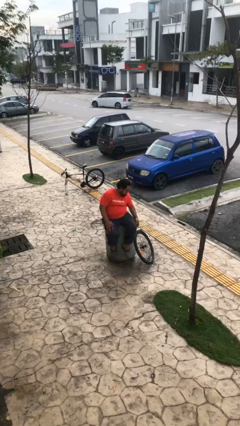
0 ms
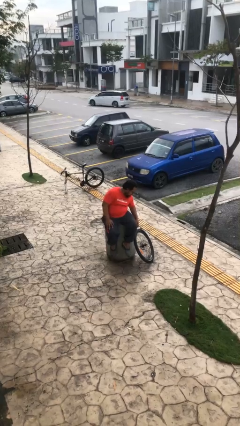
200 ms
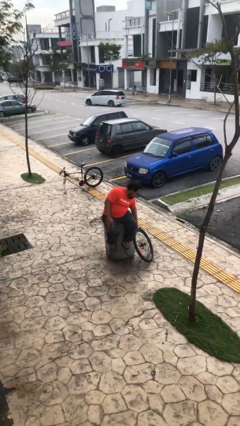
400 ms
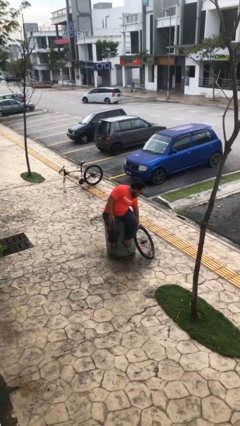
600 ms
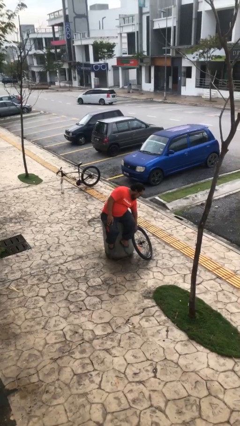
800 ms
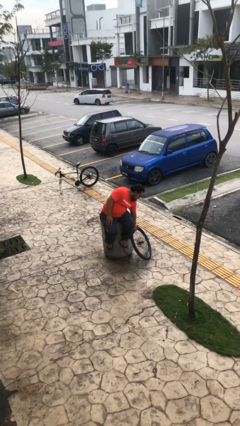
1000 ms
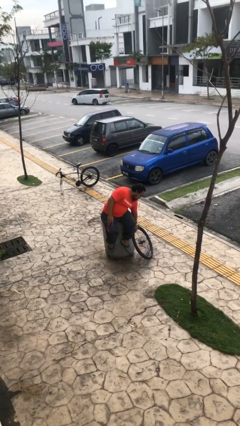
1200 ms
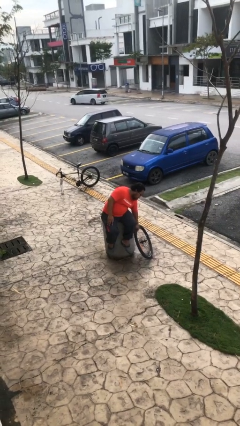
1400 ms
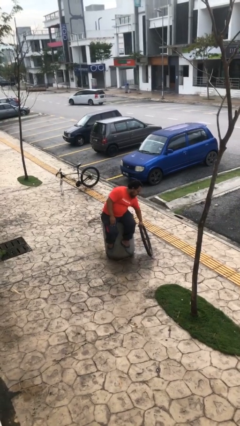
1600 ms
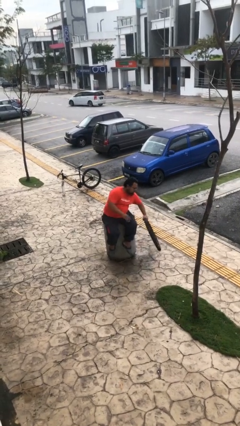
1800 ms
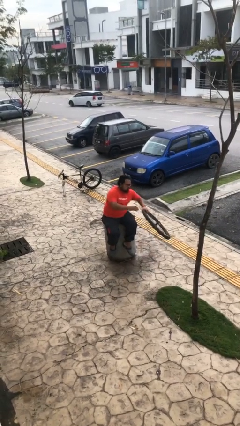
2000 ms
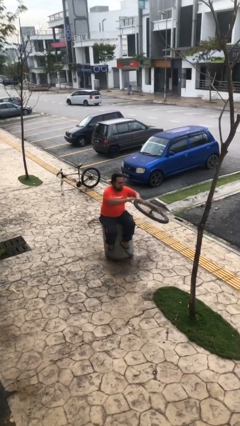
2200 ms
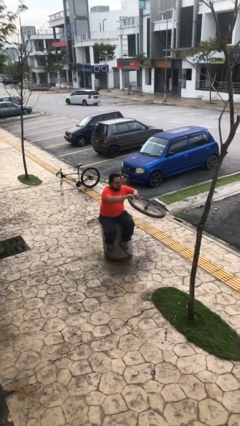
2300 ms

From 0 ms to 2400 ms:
person picks up object from floor

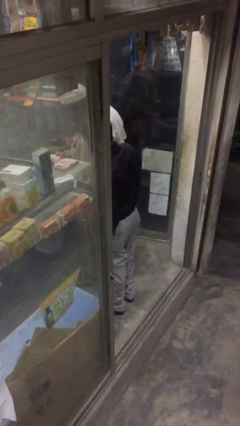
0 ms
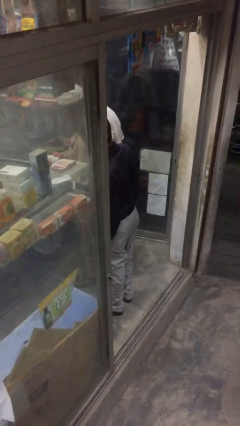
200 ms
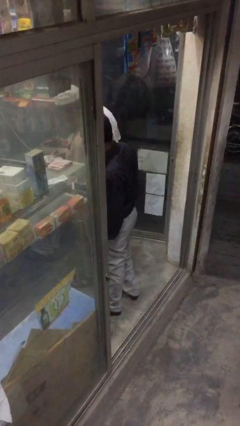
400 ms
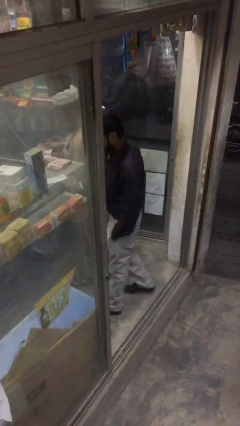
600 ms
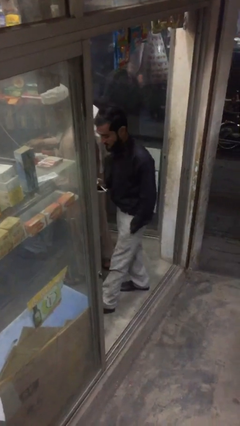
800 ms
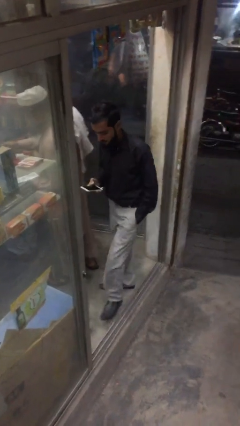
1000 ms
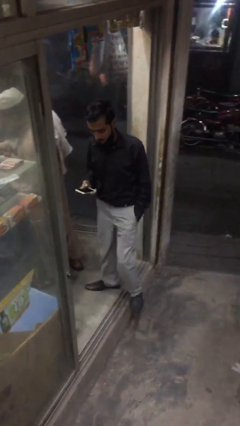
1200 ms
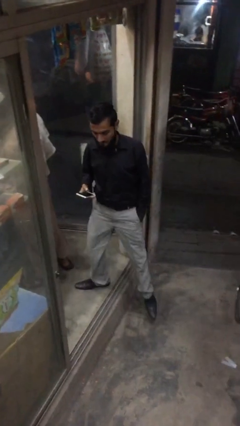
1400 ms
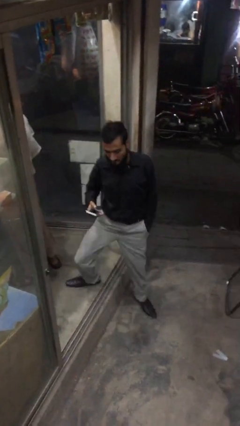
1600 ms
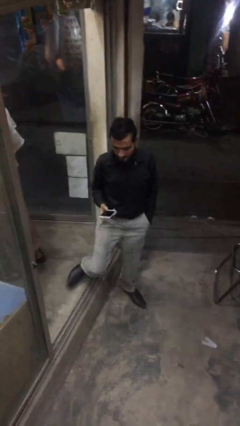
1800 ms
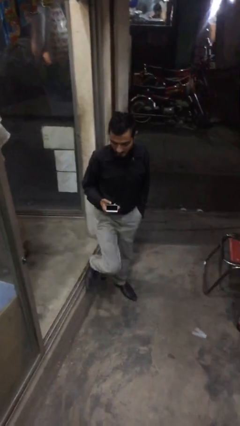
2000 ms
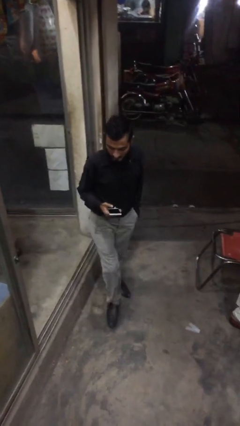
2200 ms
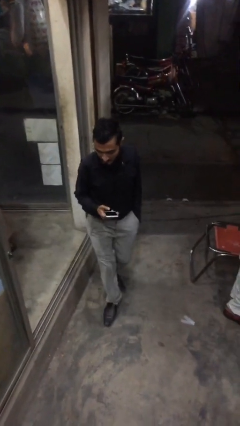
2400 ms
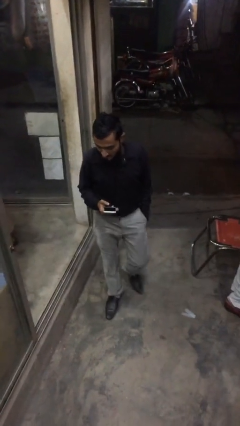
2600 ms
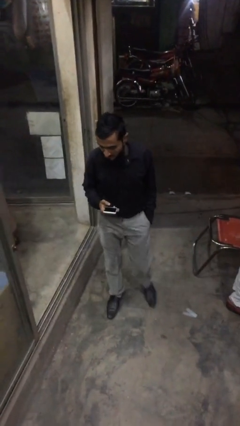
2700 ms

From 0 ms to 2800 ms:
person exits scene through structure

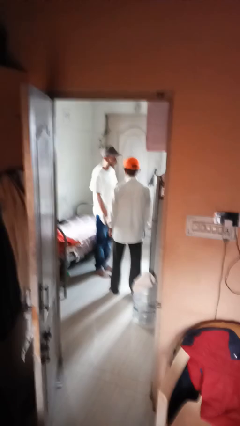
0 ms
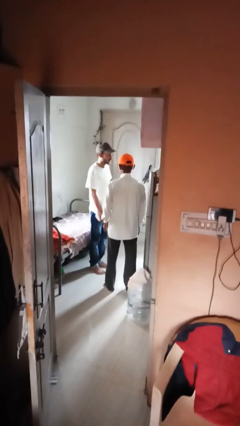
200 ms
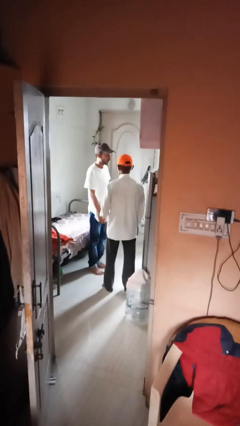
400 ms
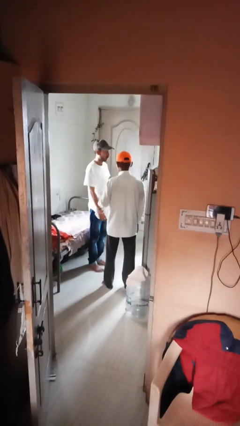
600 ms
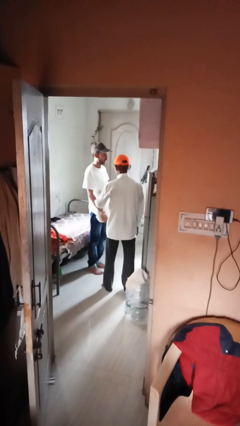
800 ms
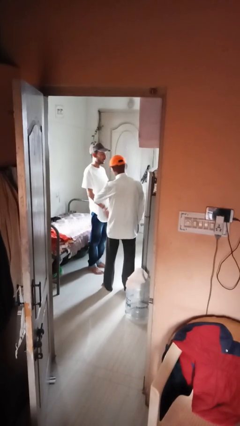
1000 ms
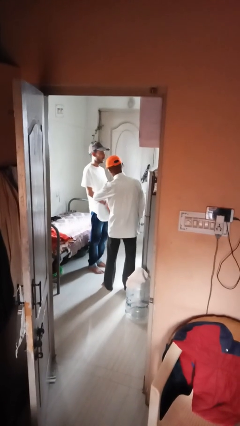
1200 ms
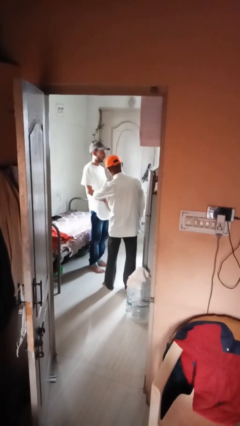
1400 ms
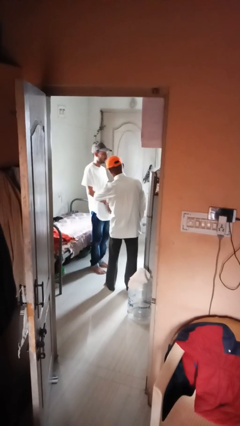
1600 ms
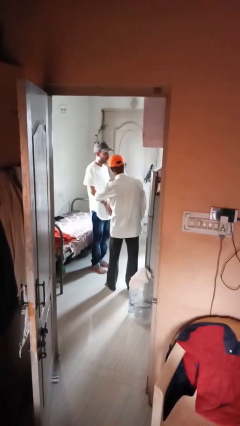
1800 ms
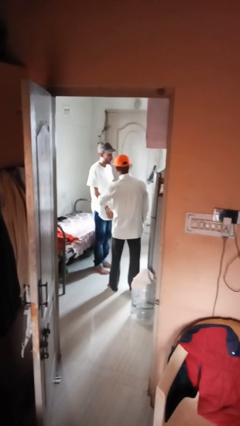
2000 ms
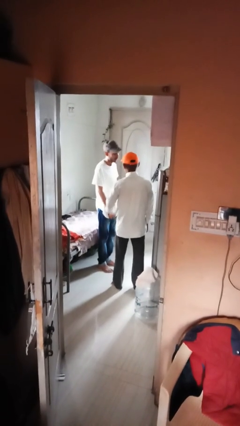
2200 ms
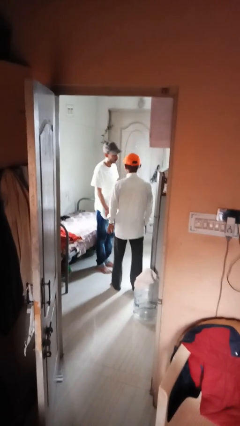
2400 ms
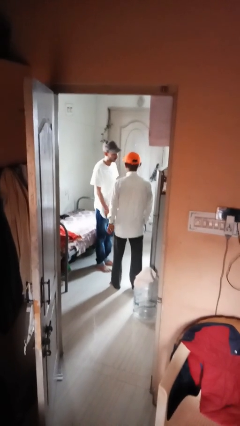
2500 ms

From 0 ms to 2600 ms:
person tickles person

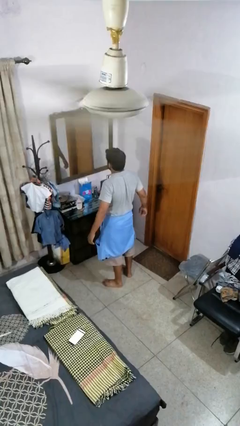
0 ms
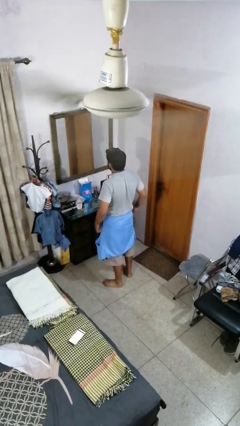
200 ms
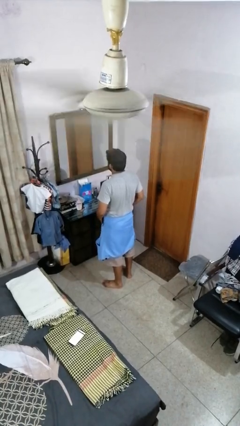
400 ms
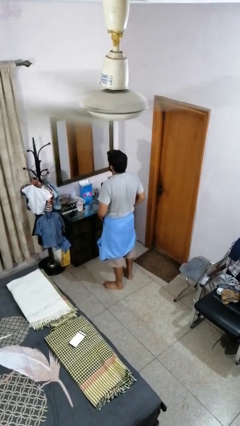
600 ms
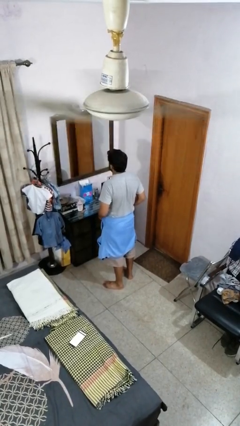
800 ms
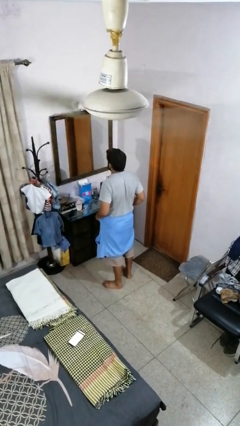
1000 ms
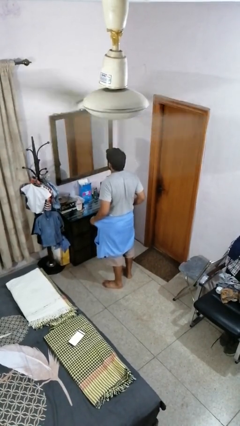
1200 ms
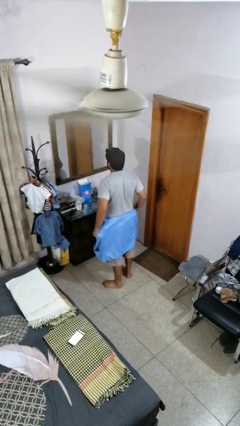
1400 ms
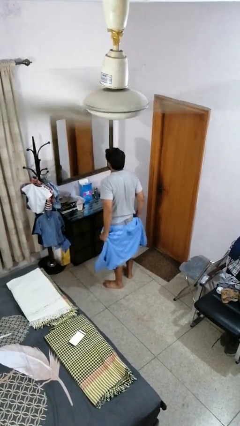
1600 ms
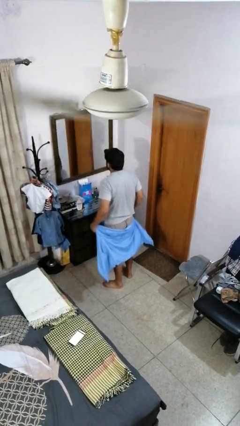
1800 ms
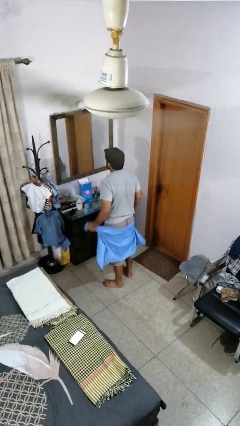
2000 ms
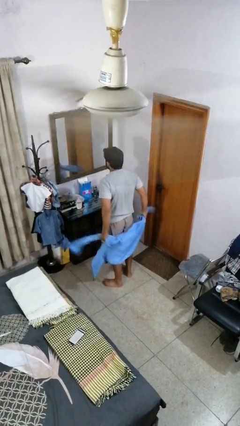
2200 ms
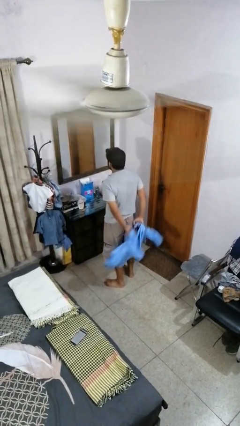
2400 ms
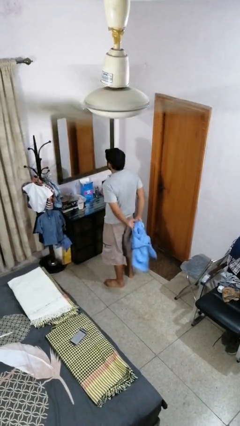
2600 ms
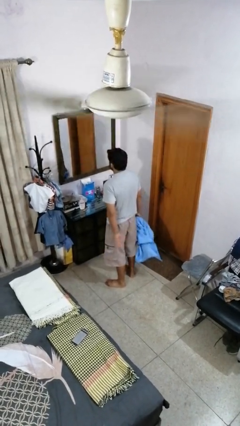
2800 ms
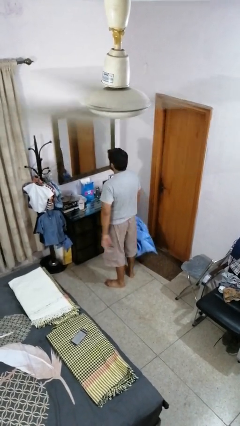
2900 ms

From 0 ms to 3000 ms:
person unties jacket around waist

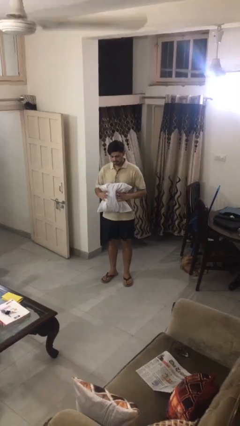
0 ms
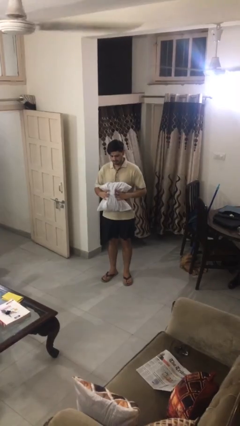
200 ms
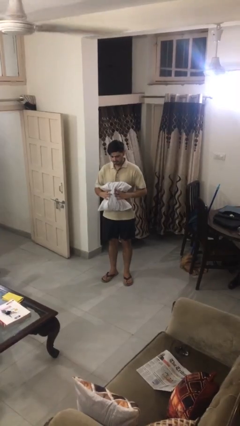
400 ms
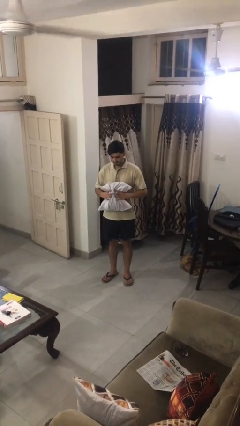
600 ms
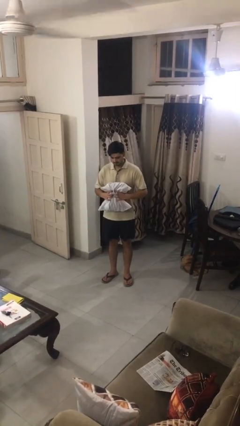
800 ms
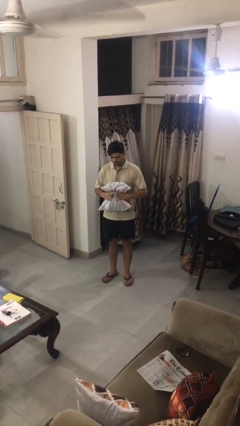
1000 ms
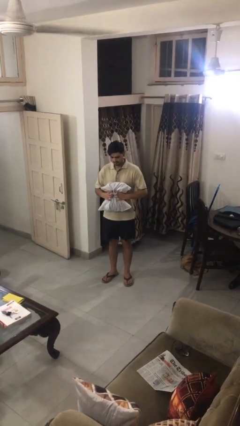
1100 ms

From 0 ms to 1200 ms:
person squeezes object

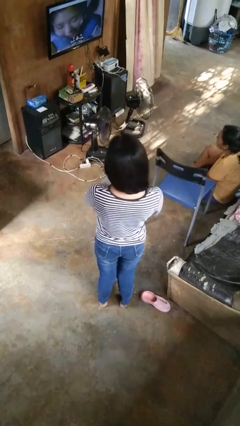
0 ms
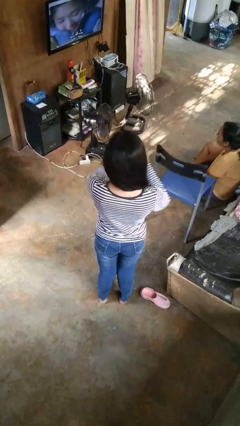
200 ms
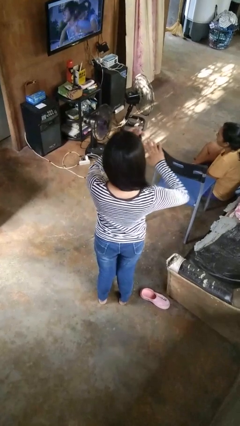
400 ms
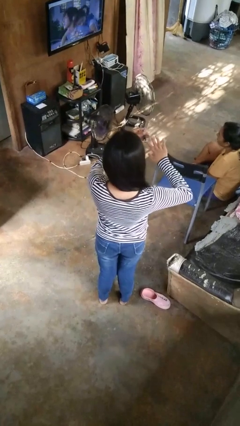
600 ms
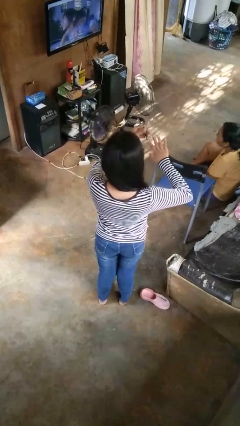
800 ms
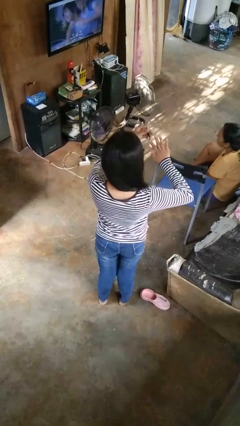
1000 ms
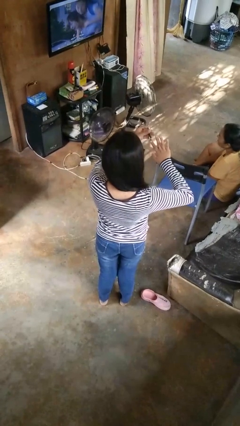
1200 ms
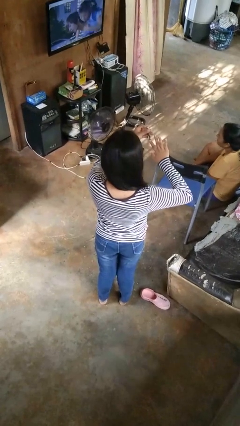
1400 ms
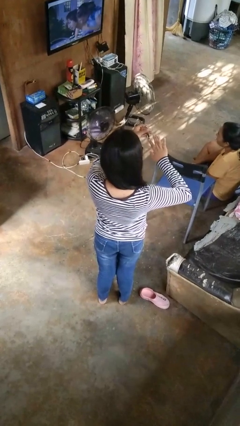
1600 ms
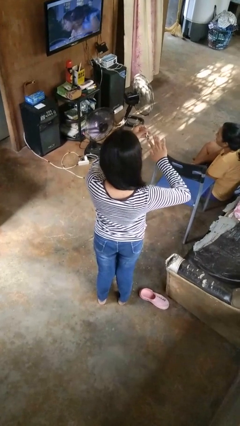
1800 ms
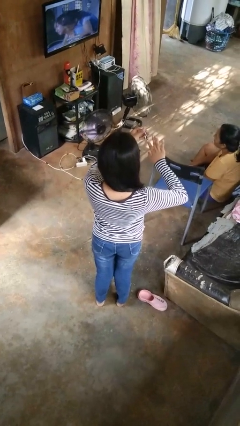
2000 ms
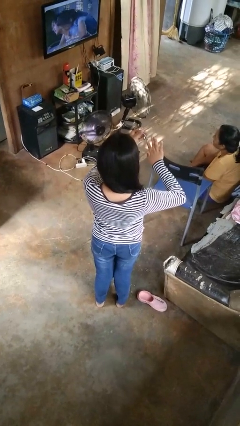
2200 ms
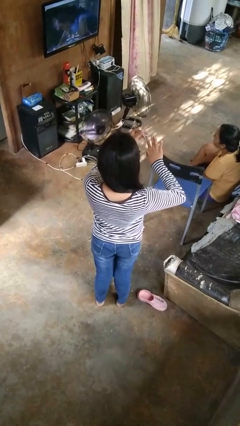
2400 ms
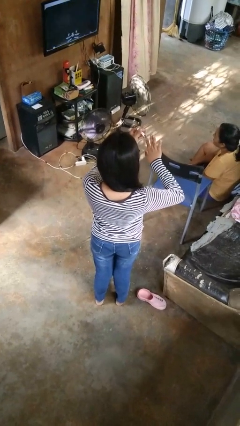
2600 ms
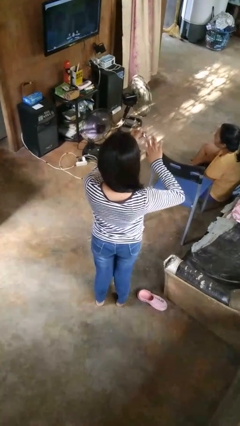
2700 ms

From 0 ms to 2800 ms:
person clips fingernails

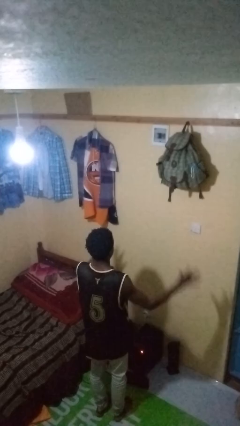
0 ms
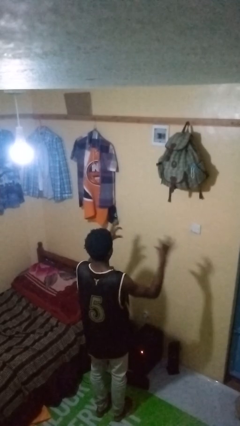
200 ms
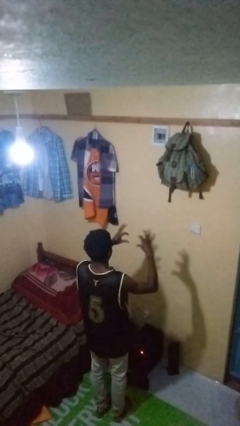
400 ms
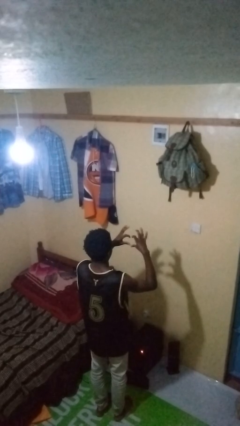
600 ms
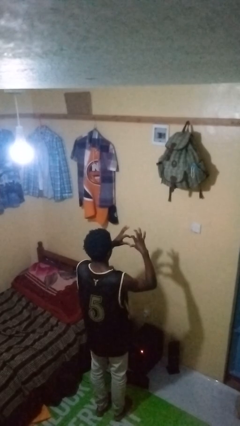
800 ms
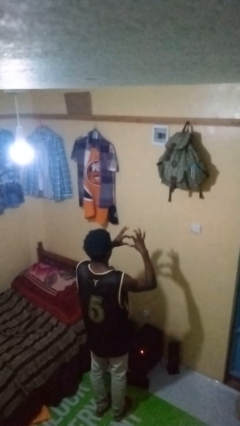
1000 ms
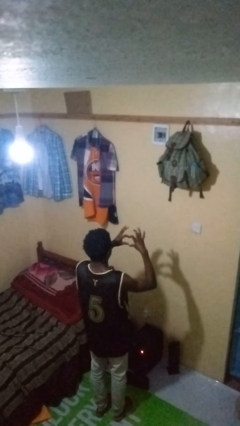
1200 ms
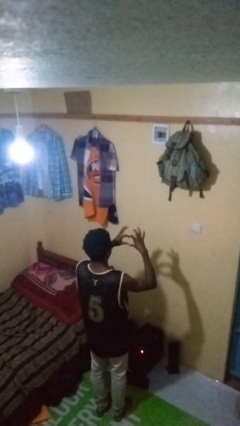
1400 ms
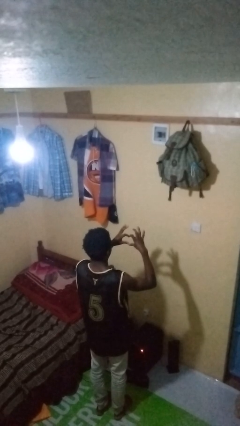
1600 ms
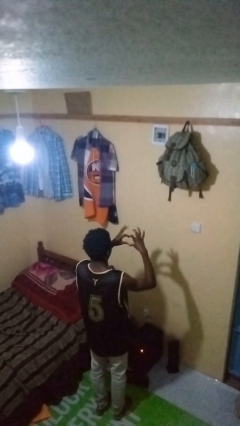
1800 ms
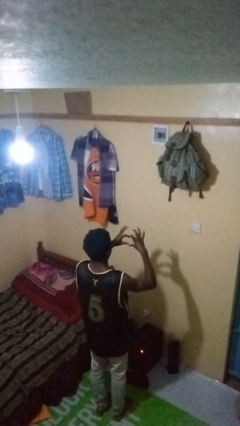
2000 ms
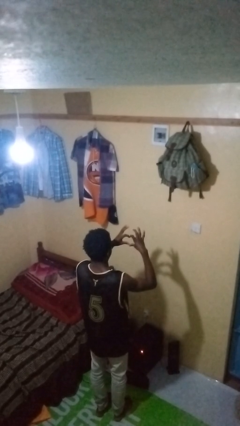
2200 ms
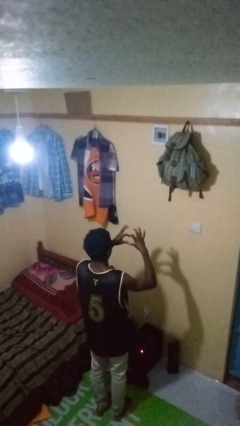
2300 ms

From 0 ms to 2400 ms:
person gestures heart
